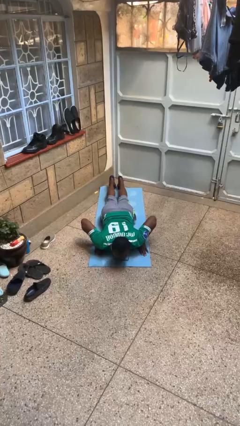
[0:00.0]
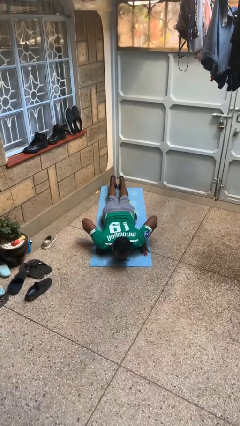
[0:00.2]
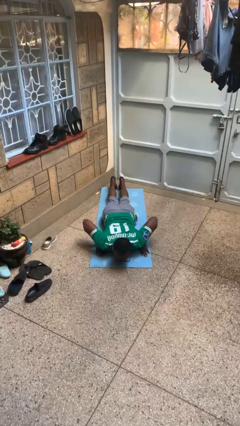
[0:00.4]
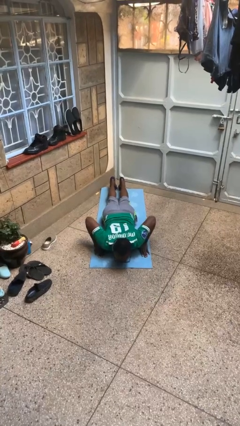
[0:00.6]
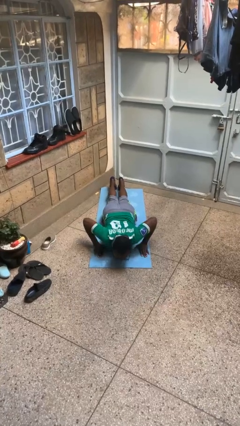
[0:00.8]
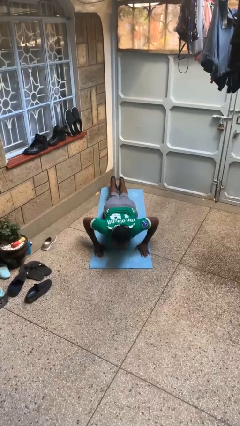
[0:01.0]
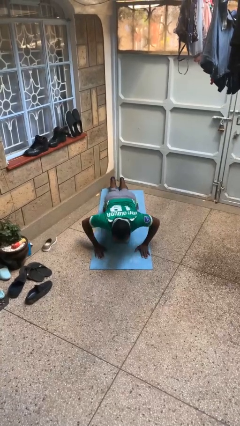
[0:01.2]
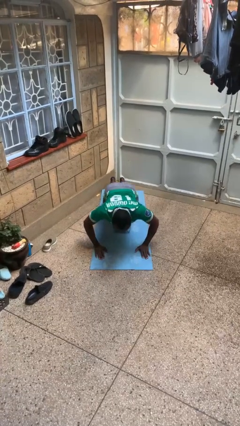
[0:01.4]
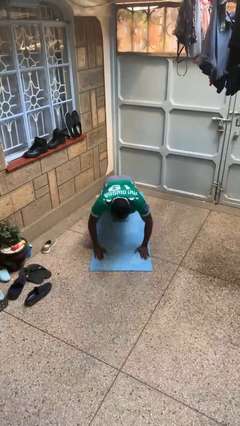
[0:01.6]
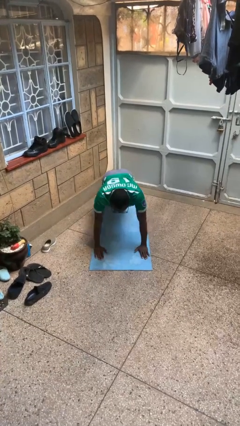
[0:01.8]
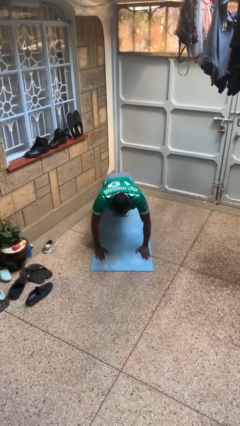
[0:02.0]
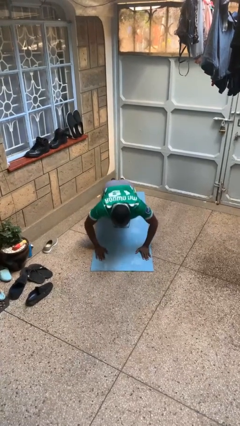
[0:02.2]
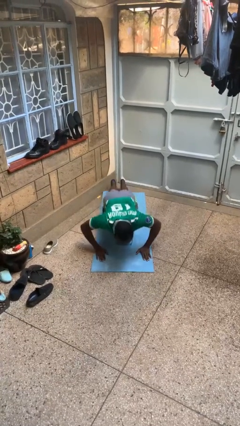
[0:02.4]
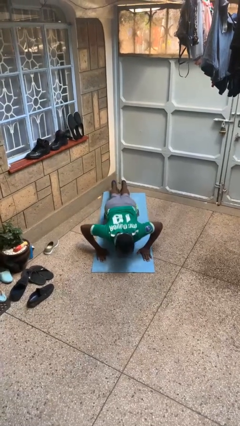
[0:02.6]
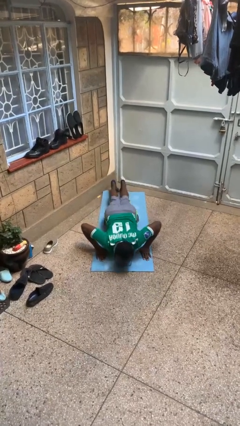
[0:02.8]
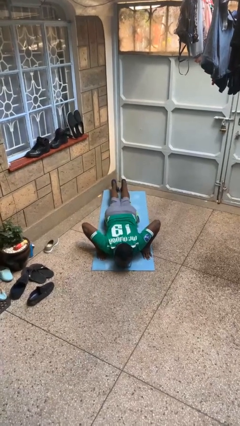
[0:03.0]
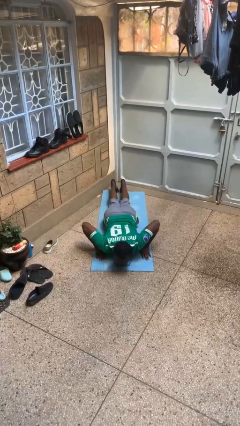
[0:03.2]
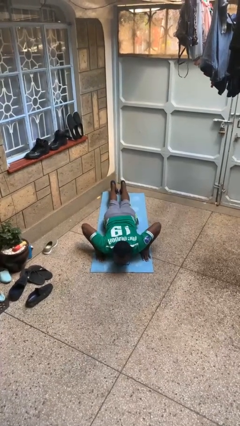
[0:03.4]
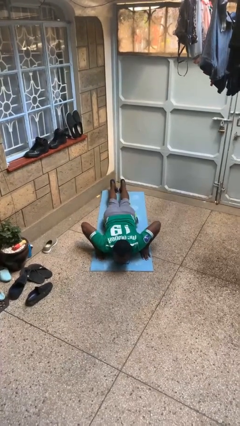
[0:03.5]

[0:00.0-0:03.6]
person exercises with pushup

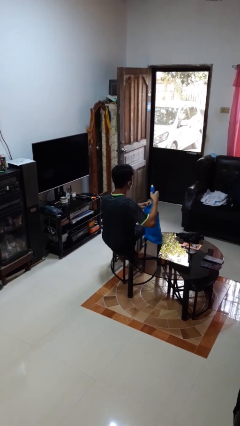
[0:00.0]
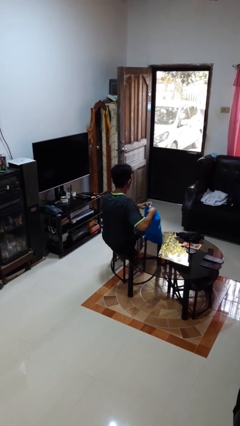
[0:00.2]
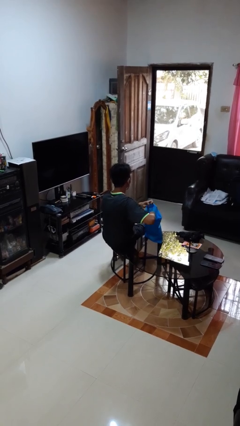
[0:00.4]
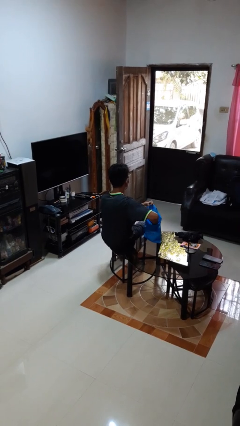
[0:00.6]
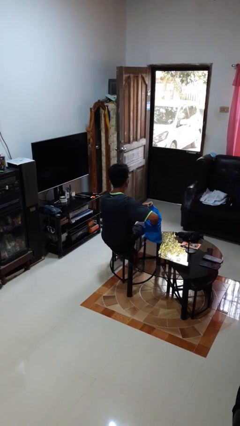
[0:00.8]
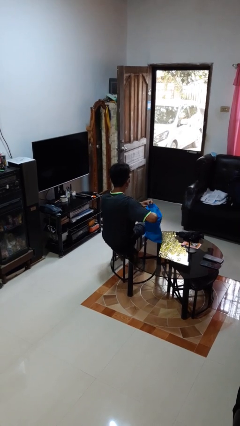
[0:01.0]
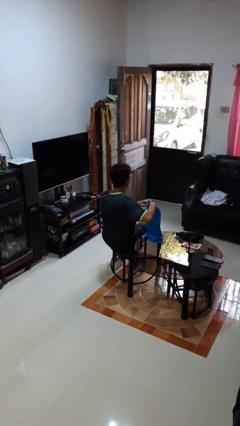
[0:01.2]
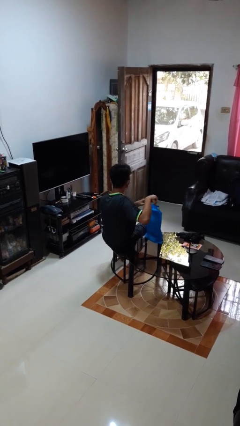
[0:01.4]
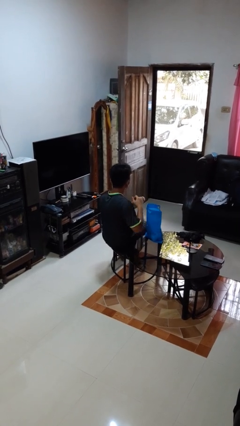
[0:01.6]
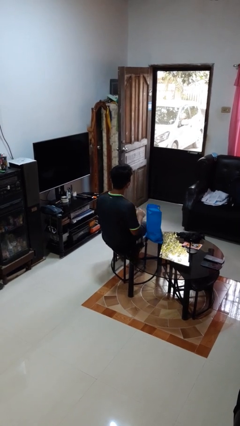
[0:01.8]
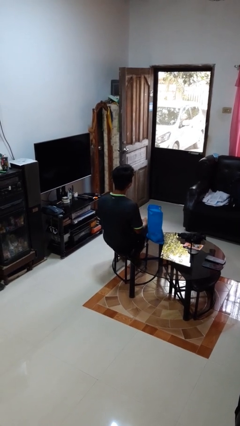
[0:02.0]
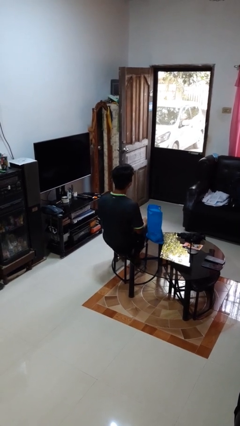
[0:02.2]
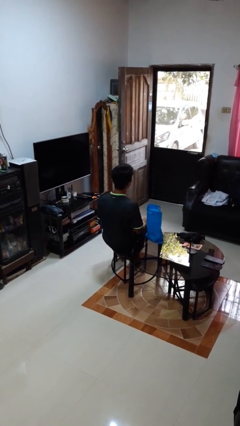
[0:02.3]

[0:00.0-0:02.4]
person puts object into bag

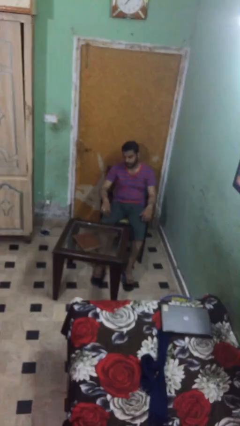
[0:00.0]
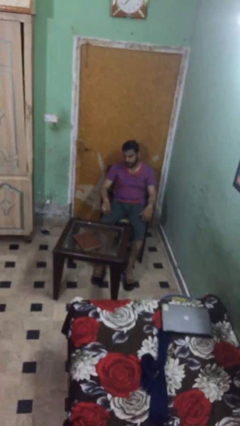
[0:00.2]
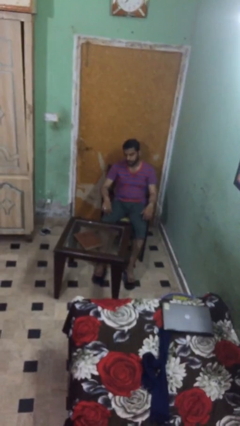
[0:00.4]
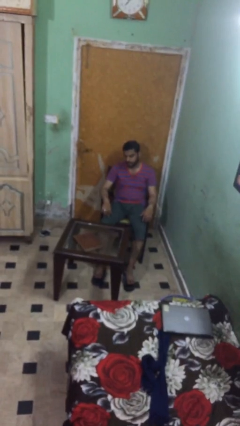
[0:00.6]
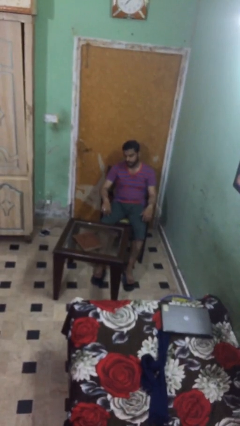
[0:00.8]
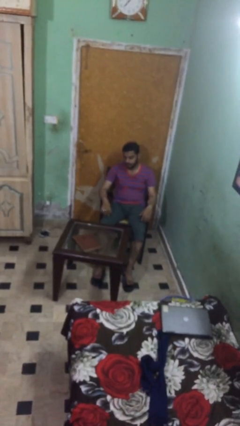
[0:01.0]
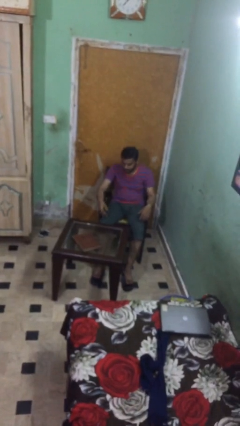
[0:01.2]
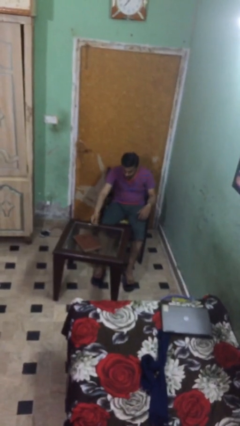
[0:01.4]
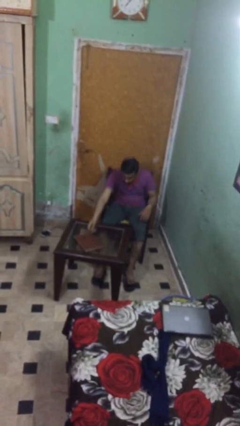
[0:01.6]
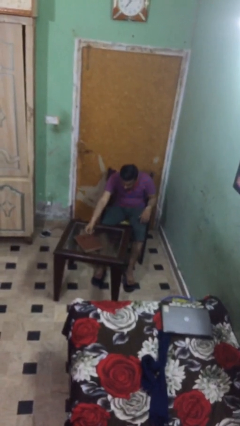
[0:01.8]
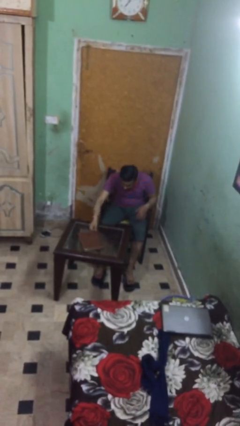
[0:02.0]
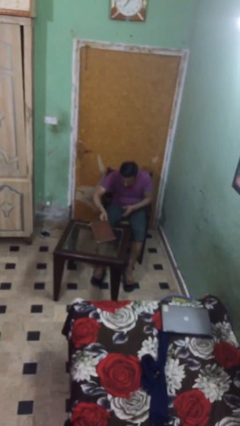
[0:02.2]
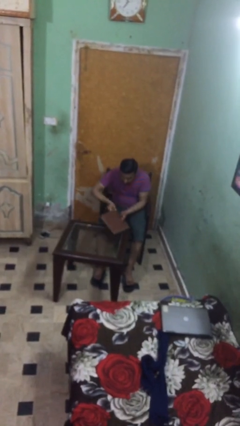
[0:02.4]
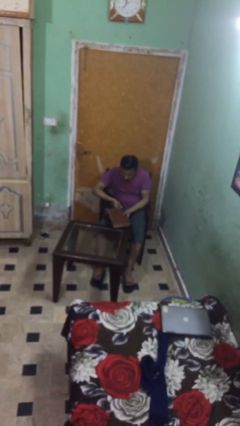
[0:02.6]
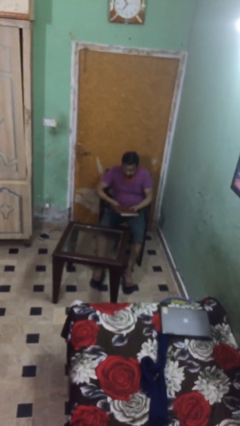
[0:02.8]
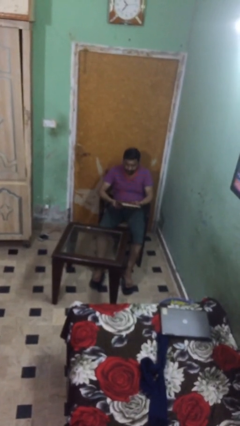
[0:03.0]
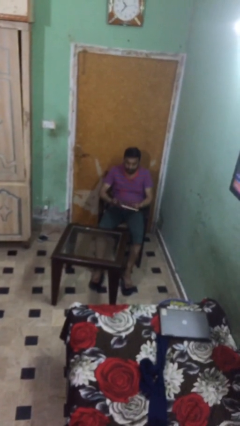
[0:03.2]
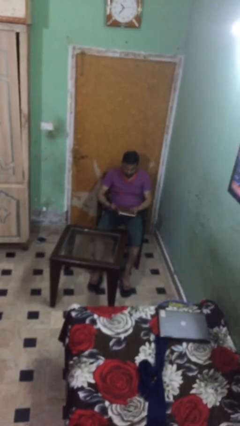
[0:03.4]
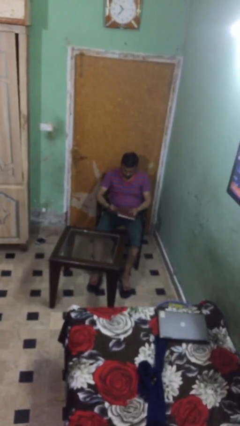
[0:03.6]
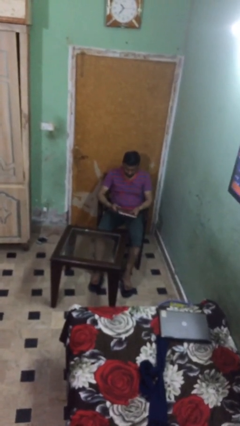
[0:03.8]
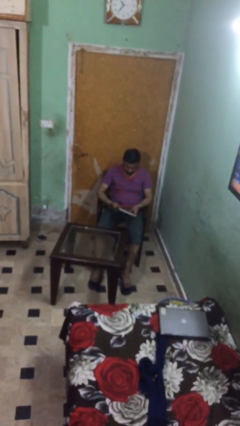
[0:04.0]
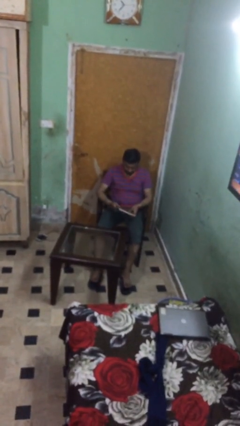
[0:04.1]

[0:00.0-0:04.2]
person picks up object from table

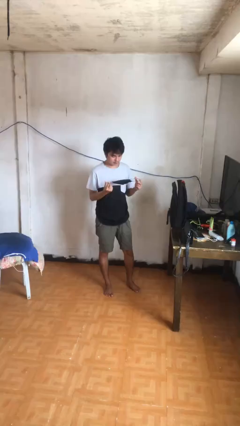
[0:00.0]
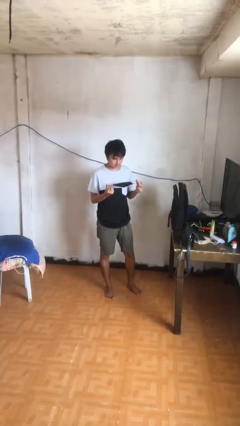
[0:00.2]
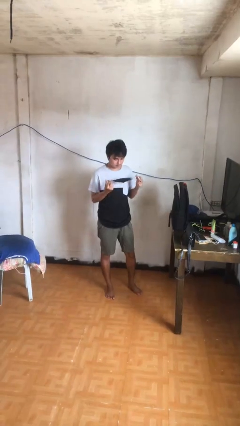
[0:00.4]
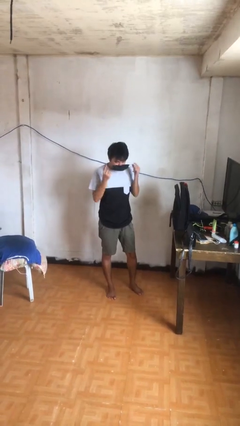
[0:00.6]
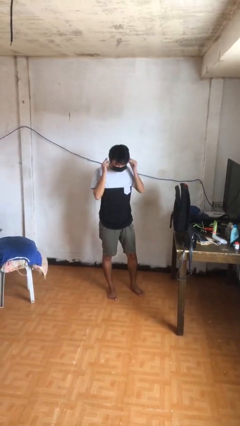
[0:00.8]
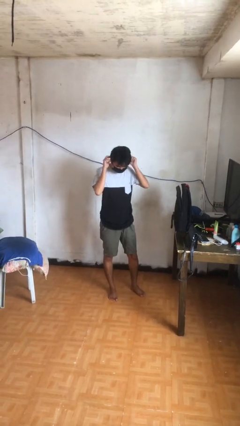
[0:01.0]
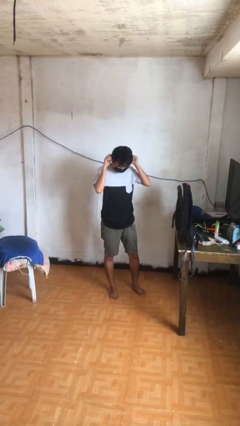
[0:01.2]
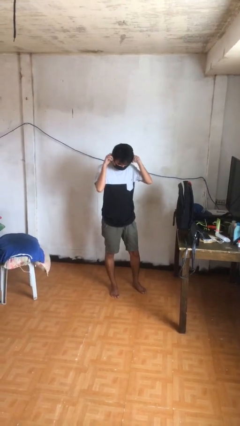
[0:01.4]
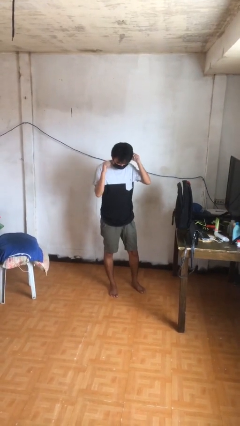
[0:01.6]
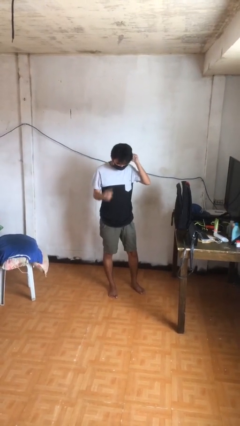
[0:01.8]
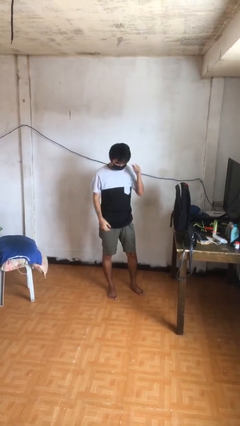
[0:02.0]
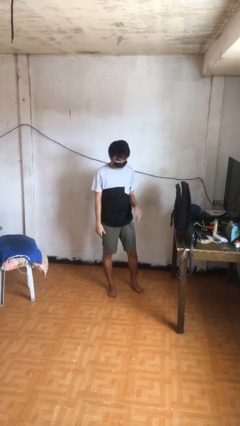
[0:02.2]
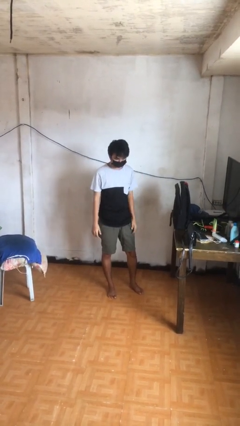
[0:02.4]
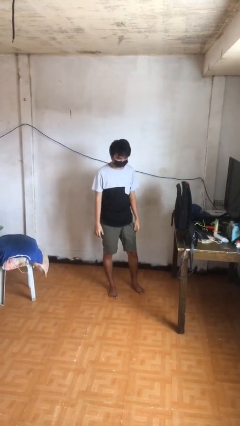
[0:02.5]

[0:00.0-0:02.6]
person puts on facemask

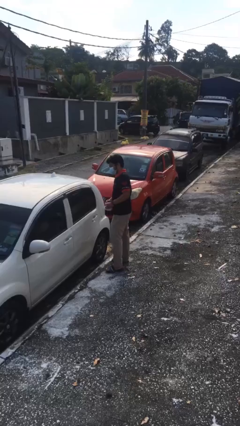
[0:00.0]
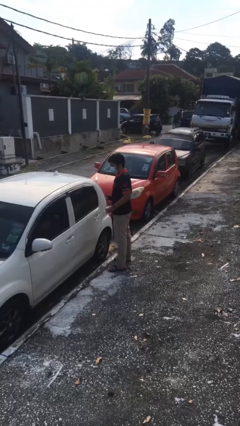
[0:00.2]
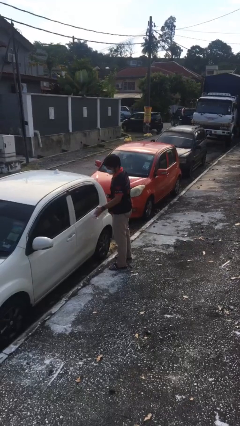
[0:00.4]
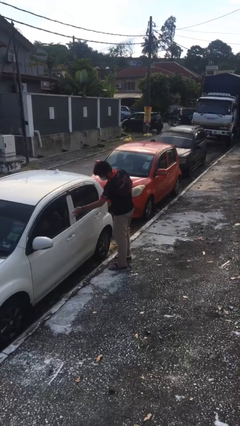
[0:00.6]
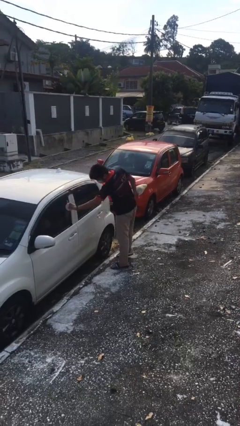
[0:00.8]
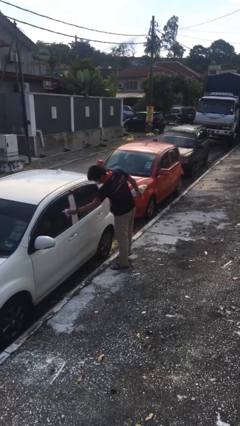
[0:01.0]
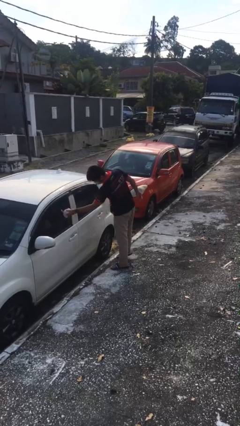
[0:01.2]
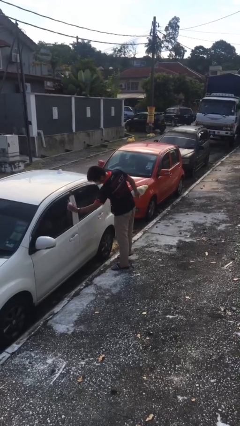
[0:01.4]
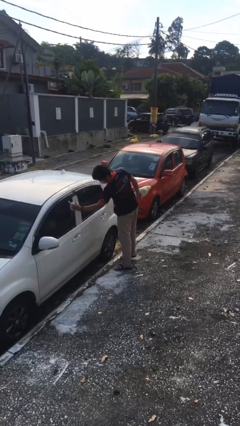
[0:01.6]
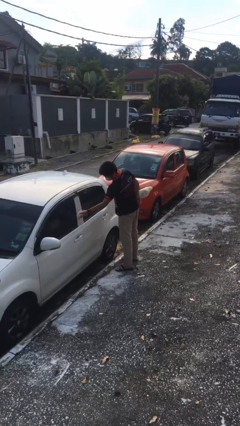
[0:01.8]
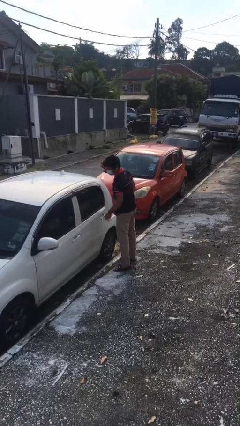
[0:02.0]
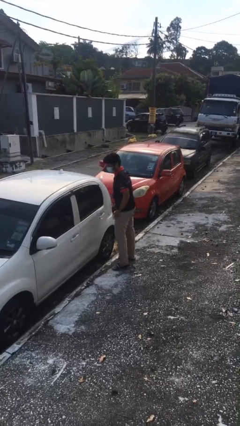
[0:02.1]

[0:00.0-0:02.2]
person polishes car with rag

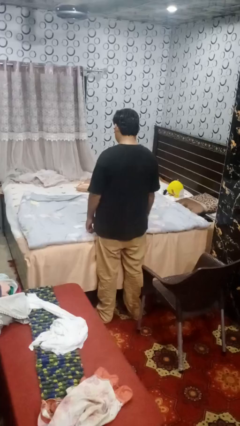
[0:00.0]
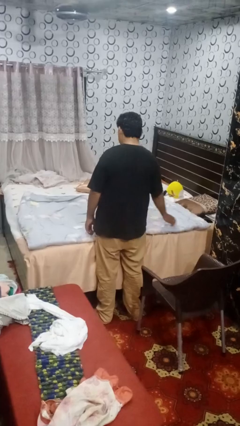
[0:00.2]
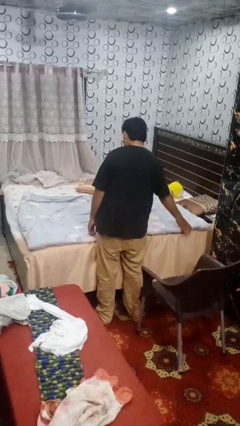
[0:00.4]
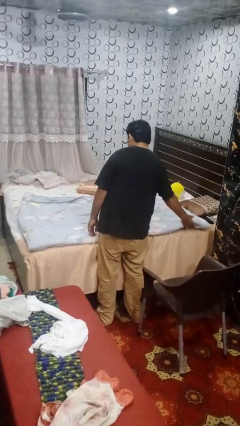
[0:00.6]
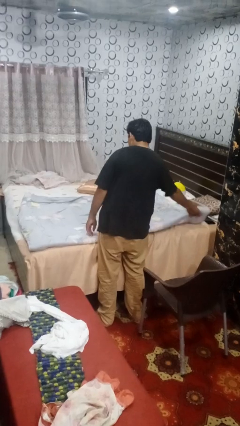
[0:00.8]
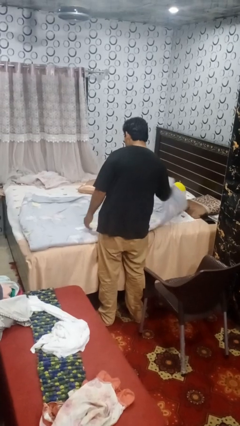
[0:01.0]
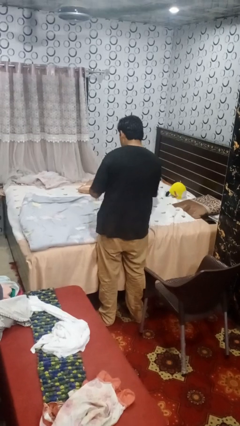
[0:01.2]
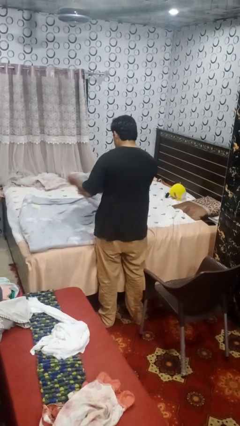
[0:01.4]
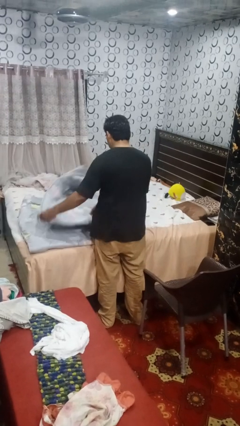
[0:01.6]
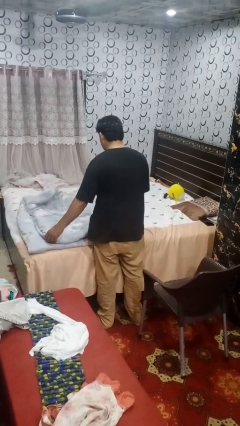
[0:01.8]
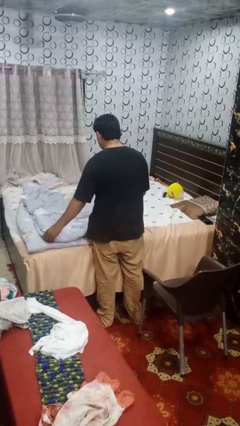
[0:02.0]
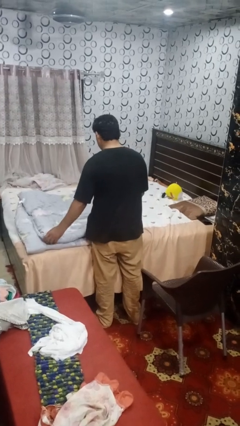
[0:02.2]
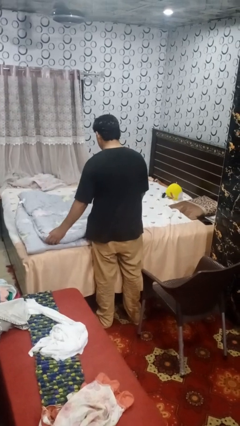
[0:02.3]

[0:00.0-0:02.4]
person folds blanket

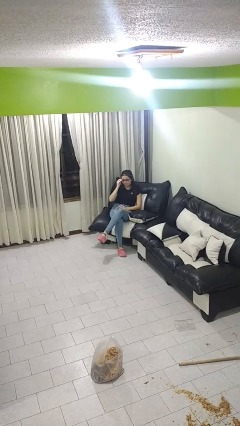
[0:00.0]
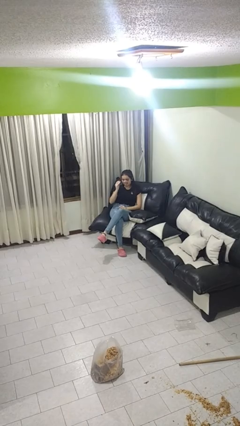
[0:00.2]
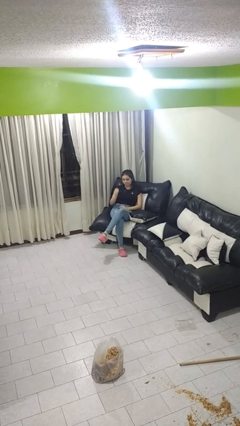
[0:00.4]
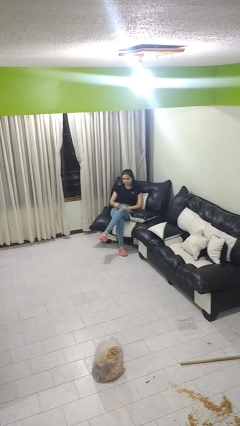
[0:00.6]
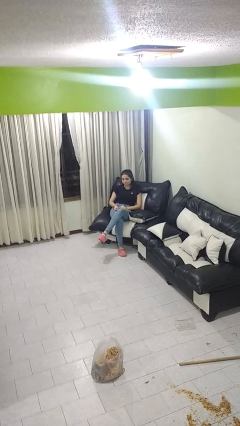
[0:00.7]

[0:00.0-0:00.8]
person takes off glasses
